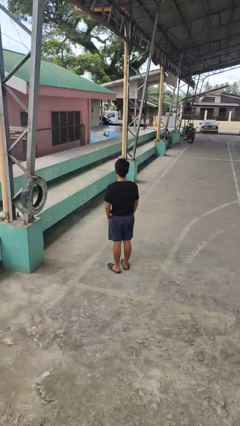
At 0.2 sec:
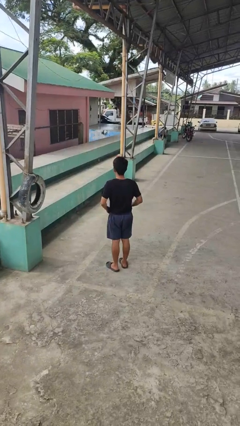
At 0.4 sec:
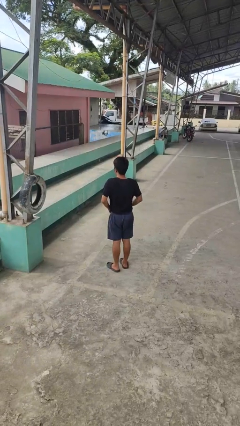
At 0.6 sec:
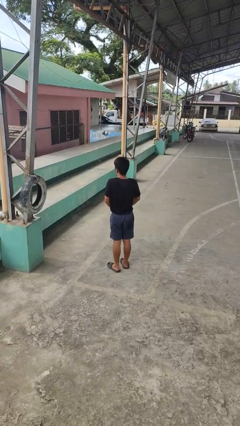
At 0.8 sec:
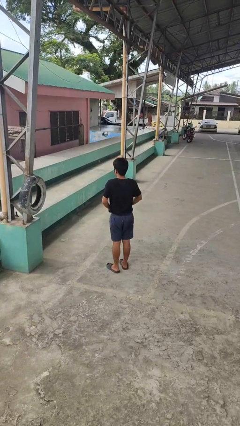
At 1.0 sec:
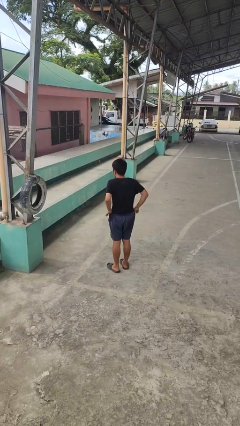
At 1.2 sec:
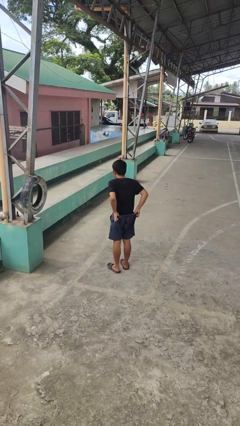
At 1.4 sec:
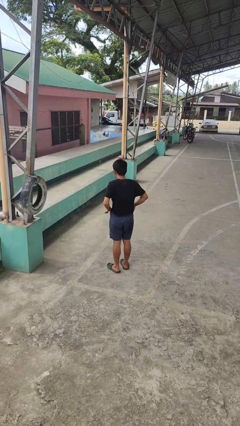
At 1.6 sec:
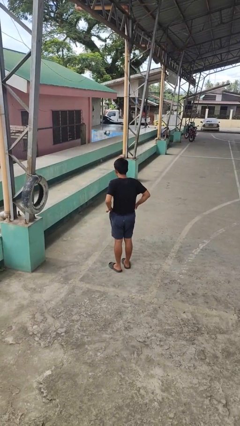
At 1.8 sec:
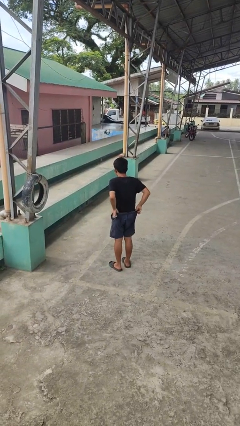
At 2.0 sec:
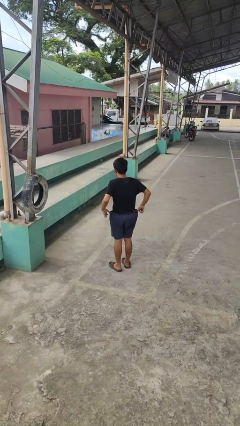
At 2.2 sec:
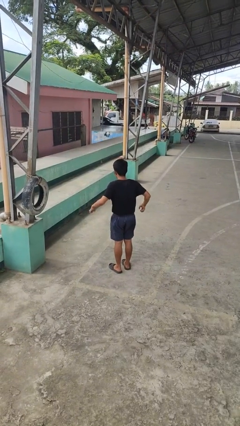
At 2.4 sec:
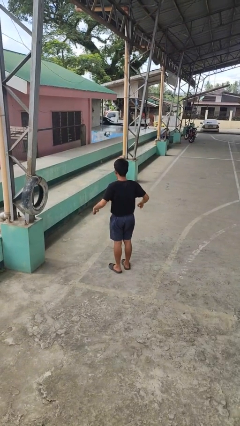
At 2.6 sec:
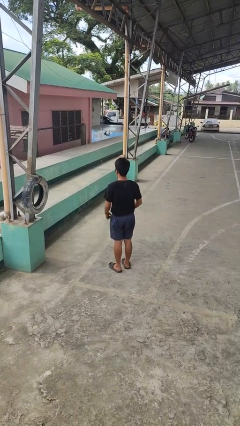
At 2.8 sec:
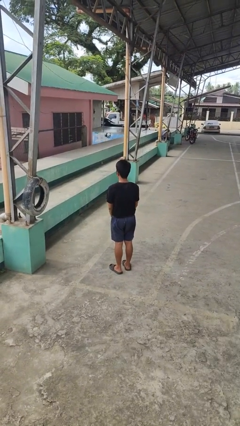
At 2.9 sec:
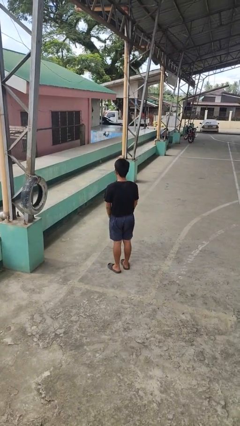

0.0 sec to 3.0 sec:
person hikes up pants

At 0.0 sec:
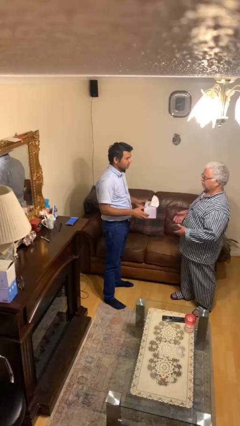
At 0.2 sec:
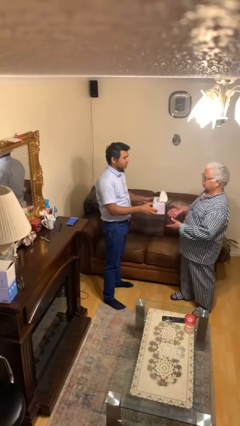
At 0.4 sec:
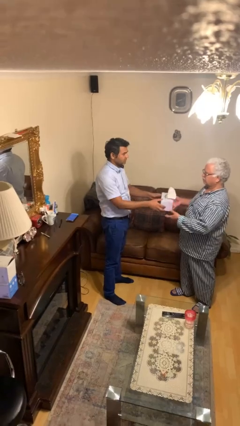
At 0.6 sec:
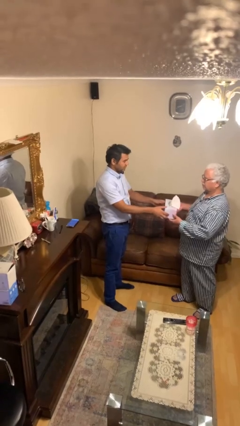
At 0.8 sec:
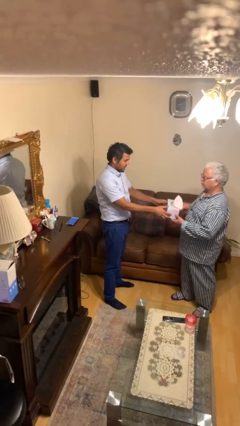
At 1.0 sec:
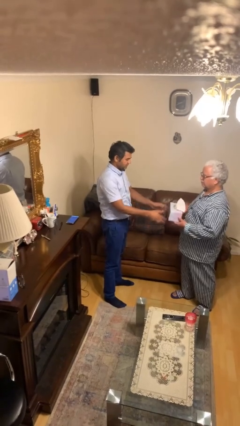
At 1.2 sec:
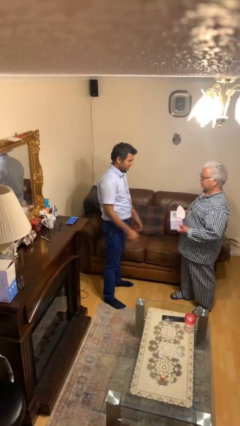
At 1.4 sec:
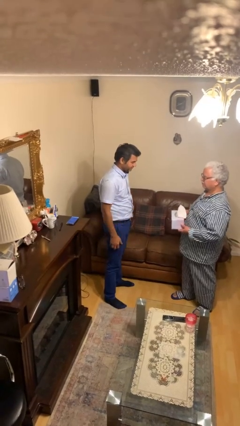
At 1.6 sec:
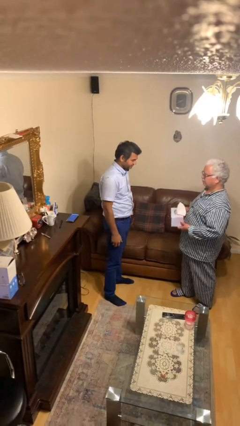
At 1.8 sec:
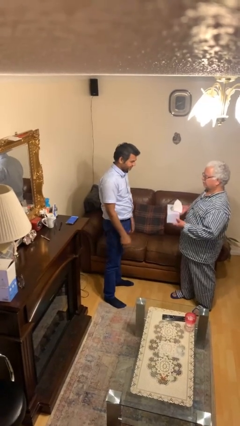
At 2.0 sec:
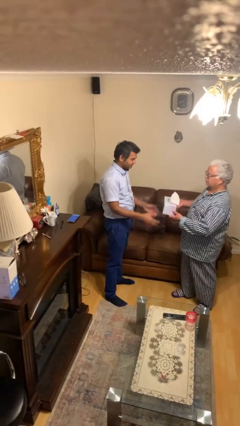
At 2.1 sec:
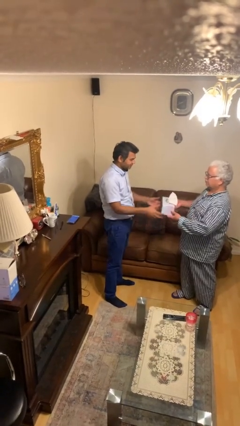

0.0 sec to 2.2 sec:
person transfers object to person

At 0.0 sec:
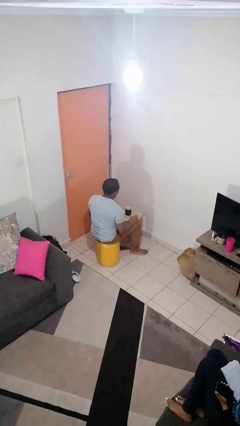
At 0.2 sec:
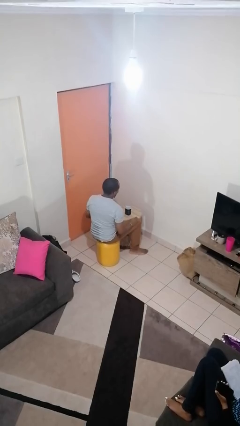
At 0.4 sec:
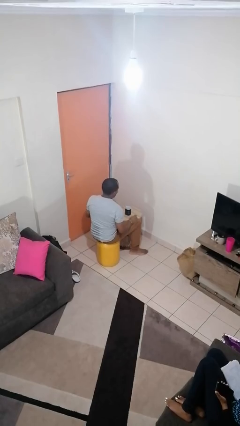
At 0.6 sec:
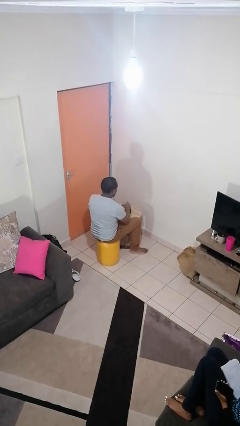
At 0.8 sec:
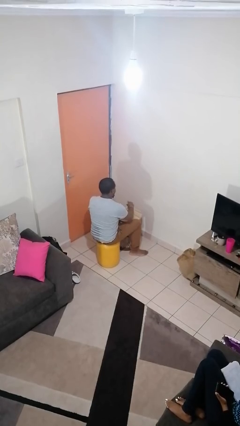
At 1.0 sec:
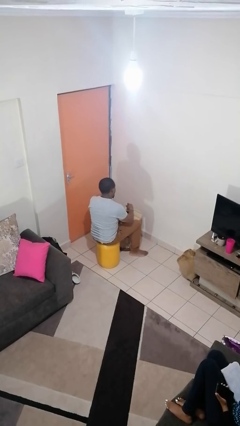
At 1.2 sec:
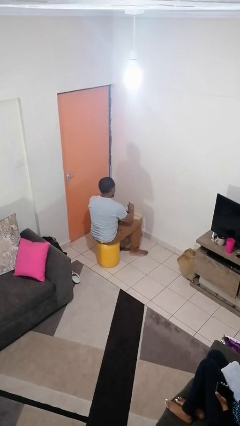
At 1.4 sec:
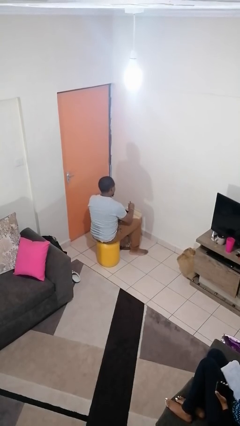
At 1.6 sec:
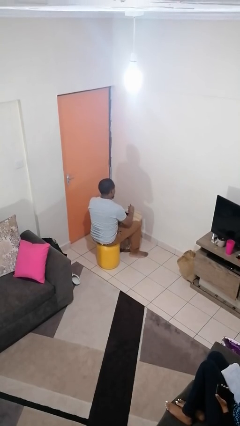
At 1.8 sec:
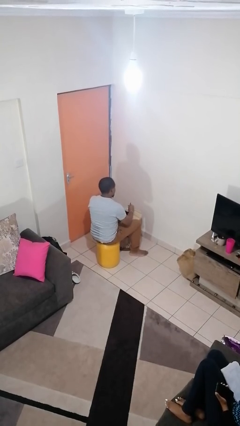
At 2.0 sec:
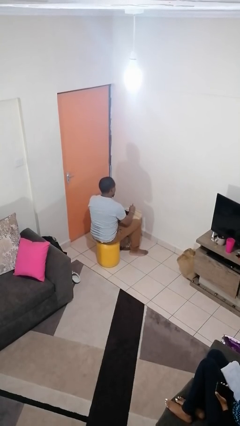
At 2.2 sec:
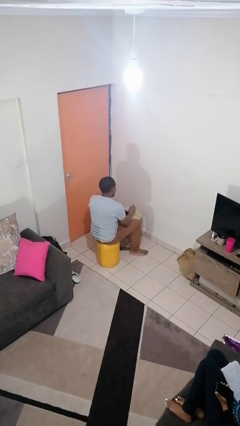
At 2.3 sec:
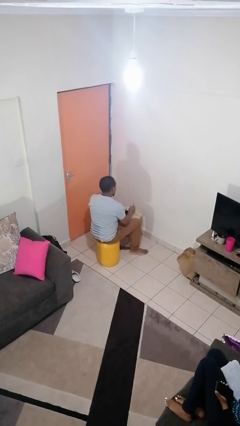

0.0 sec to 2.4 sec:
person stirs mug

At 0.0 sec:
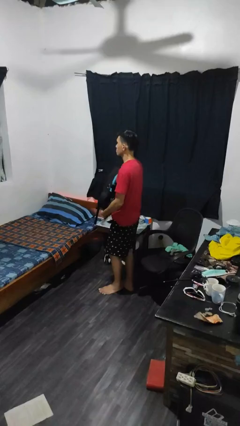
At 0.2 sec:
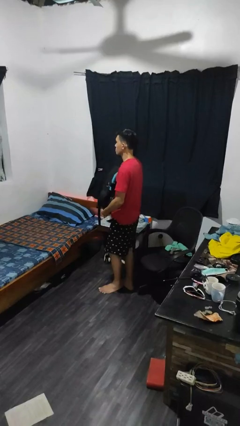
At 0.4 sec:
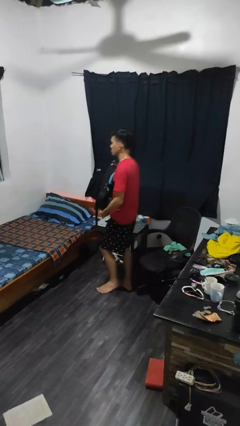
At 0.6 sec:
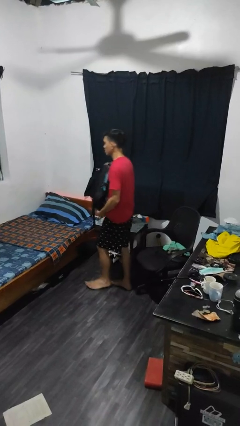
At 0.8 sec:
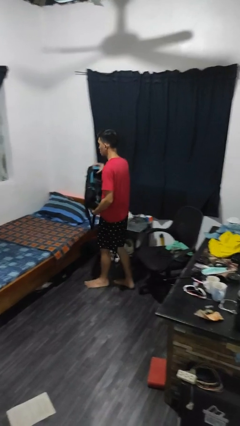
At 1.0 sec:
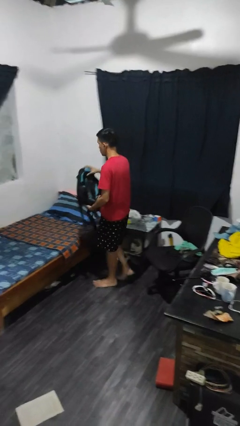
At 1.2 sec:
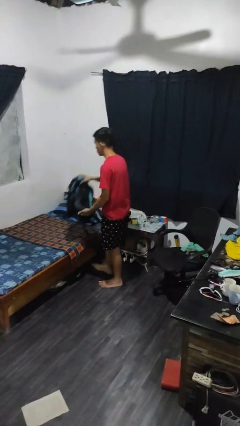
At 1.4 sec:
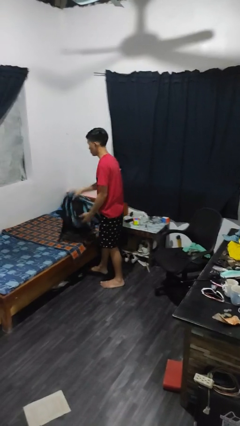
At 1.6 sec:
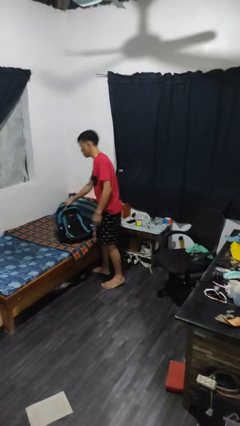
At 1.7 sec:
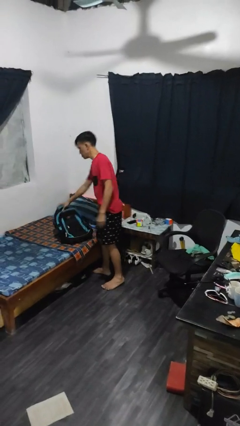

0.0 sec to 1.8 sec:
person puts down object on bed

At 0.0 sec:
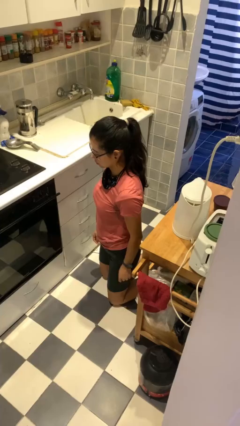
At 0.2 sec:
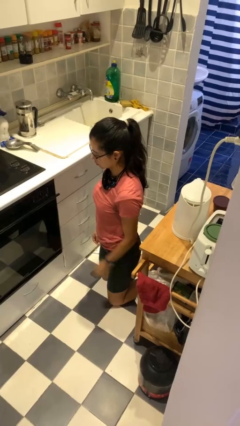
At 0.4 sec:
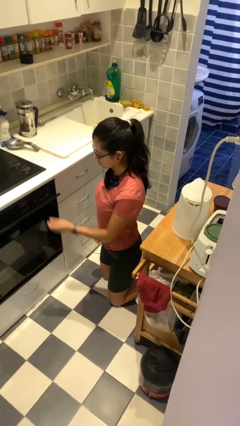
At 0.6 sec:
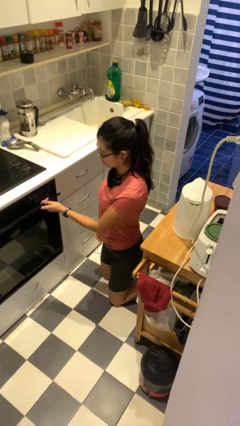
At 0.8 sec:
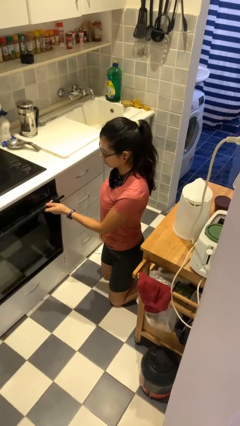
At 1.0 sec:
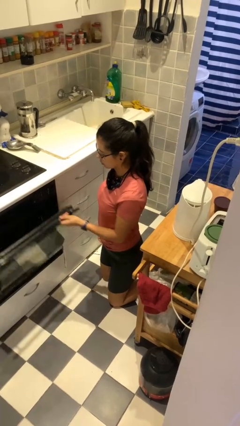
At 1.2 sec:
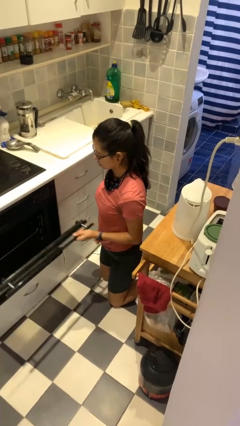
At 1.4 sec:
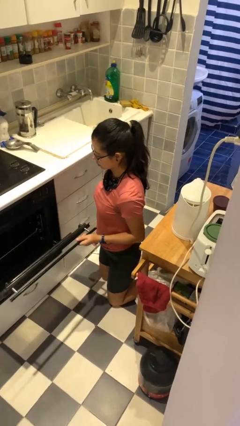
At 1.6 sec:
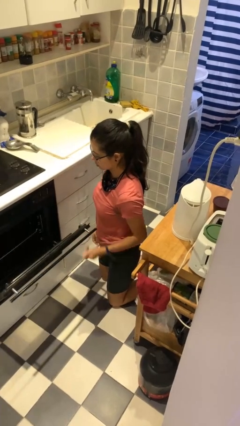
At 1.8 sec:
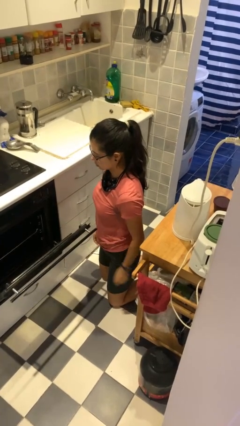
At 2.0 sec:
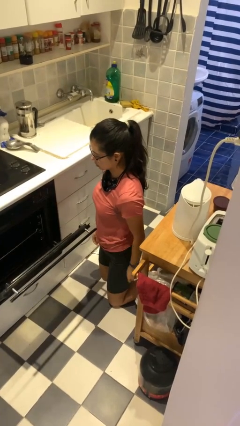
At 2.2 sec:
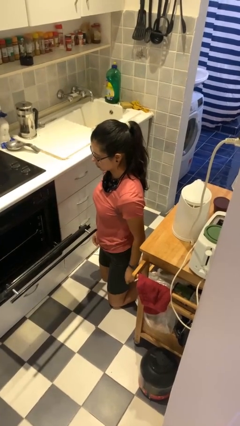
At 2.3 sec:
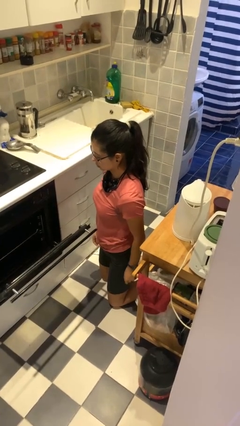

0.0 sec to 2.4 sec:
person opens oven door

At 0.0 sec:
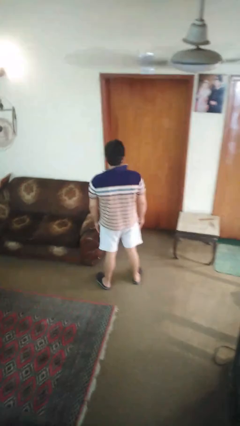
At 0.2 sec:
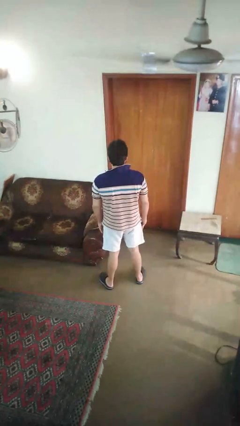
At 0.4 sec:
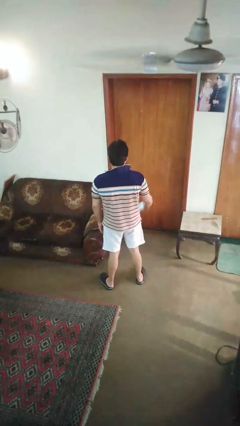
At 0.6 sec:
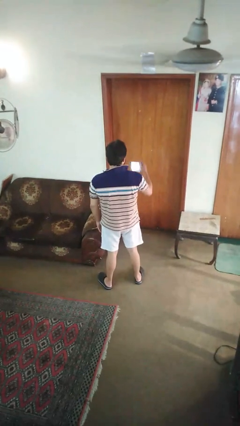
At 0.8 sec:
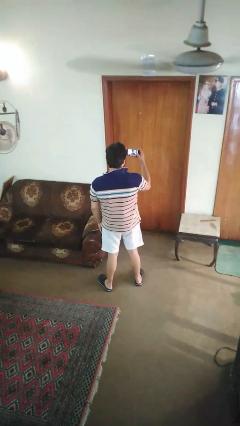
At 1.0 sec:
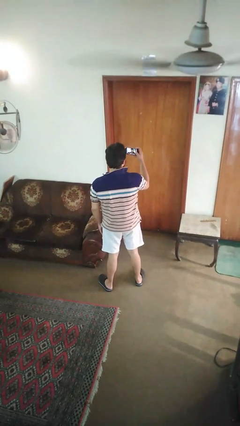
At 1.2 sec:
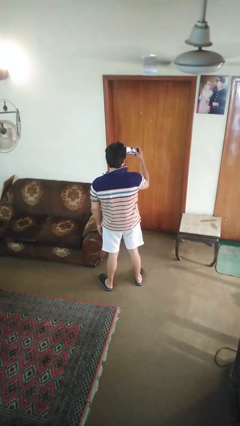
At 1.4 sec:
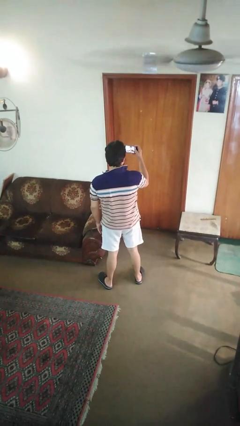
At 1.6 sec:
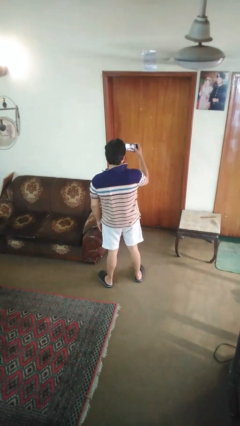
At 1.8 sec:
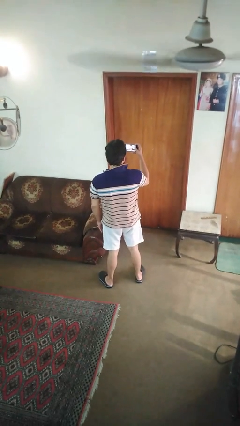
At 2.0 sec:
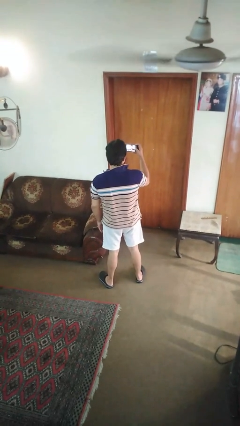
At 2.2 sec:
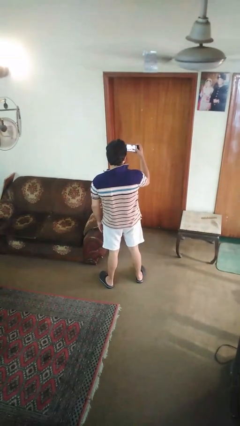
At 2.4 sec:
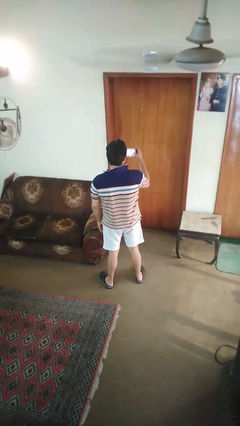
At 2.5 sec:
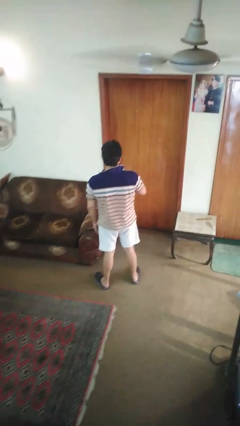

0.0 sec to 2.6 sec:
person takes selfie

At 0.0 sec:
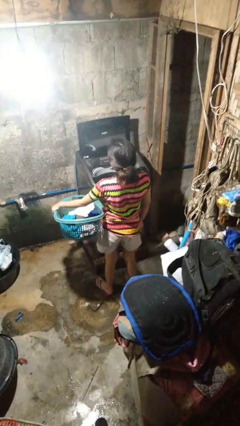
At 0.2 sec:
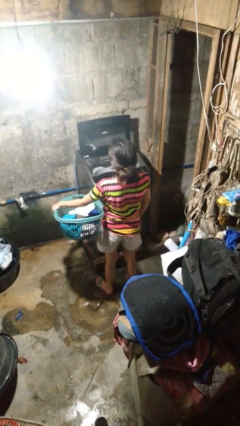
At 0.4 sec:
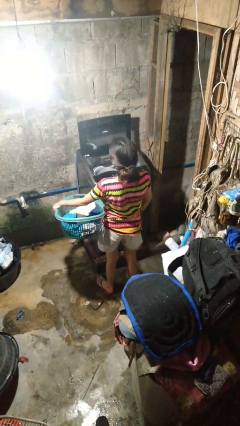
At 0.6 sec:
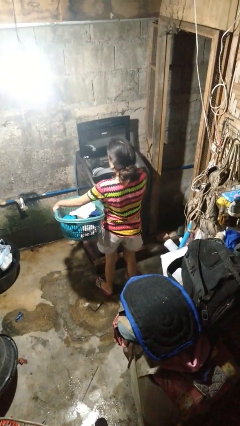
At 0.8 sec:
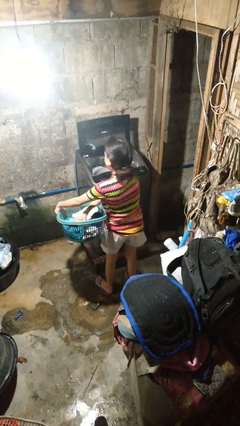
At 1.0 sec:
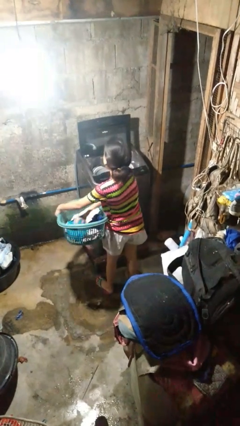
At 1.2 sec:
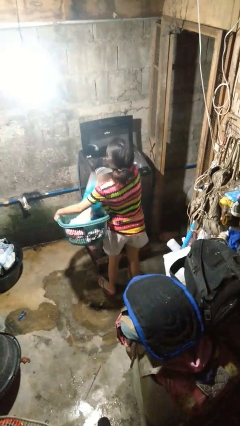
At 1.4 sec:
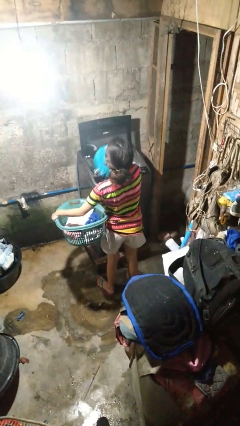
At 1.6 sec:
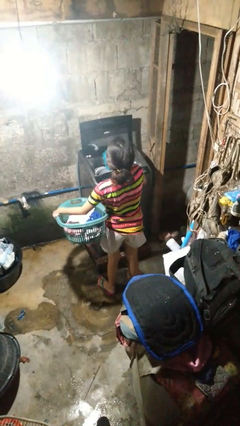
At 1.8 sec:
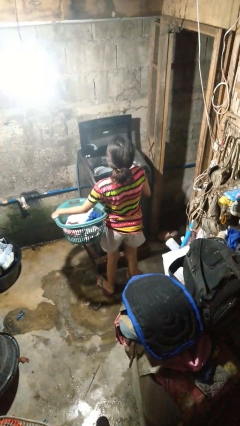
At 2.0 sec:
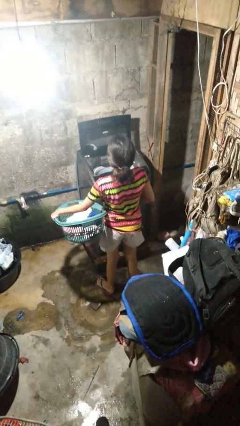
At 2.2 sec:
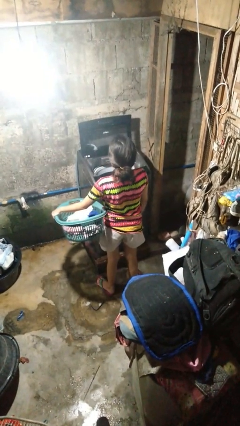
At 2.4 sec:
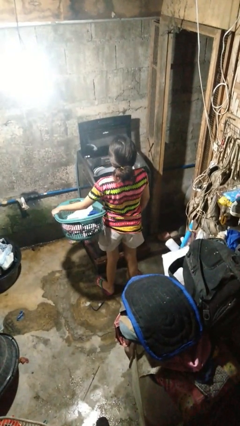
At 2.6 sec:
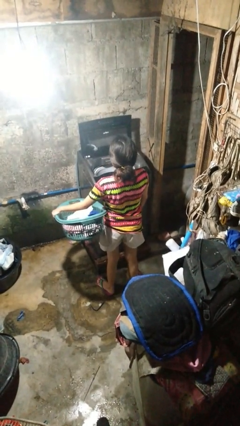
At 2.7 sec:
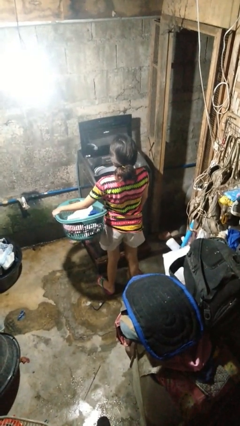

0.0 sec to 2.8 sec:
person loads clotheswasher
